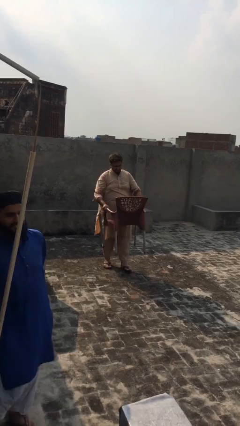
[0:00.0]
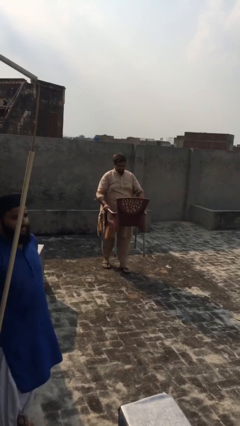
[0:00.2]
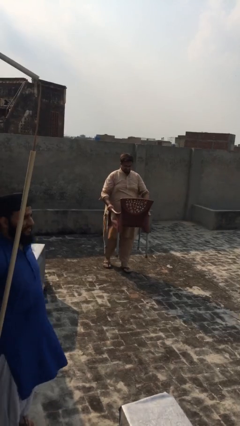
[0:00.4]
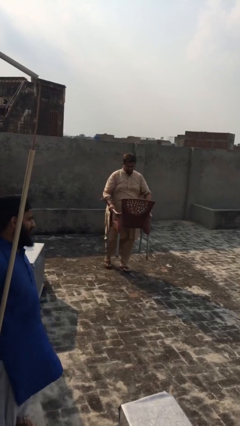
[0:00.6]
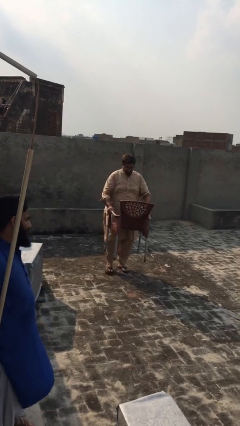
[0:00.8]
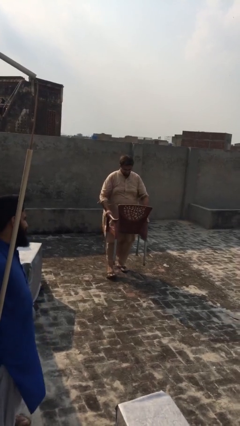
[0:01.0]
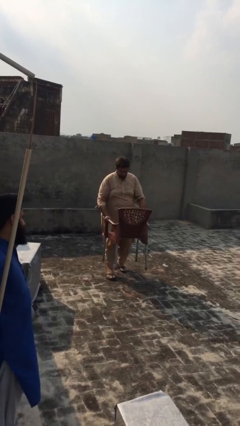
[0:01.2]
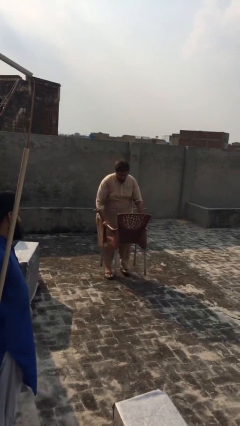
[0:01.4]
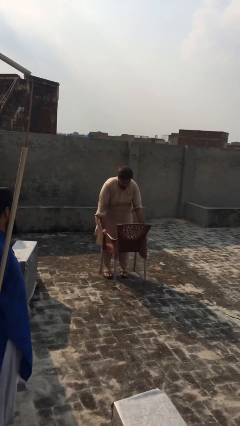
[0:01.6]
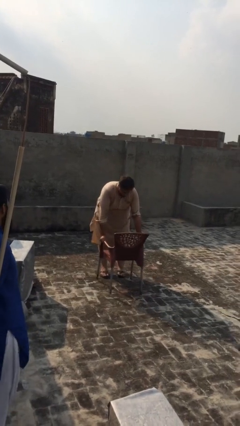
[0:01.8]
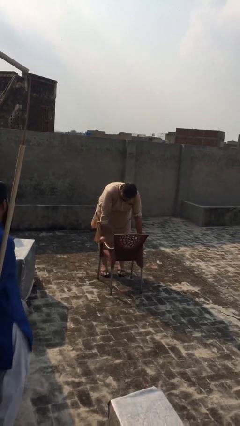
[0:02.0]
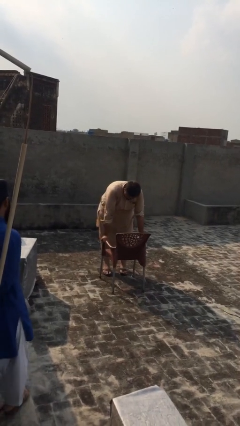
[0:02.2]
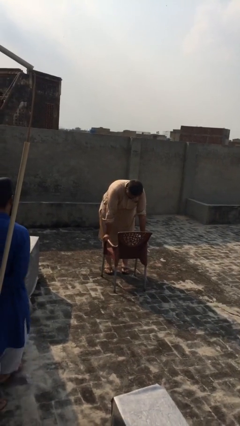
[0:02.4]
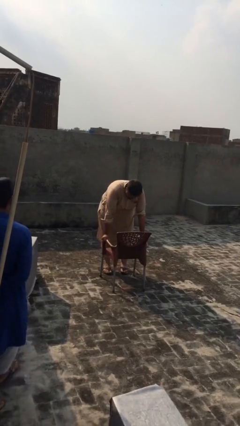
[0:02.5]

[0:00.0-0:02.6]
person puts down object on floor

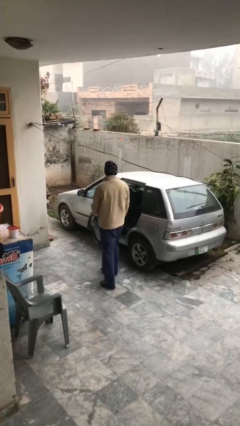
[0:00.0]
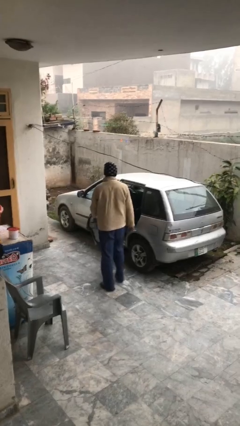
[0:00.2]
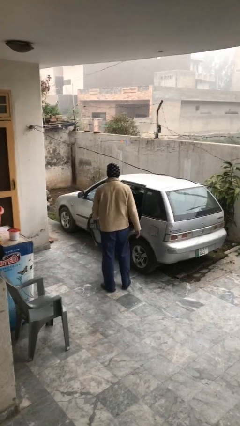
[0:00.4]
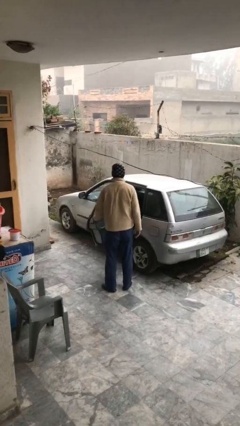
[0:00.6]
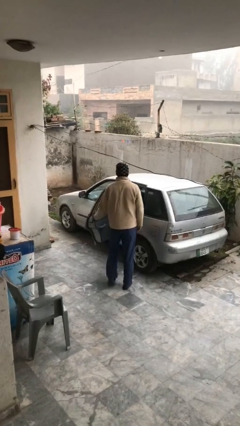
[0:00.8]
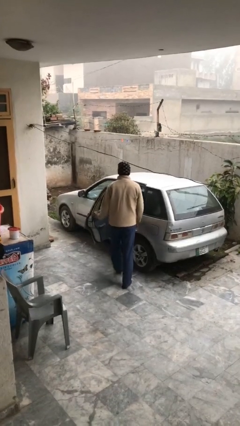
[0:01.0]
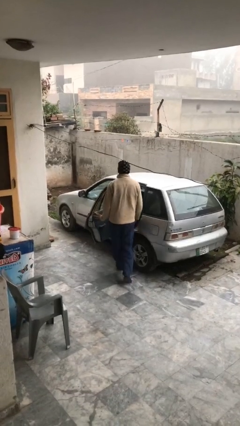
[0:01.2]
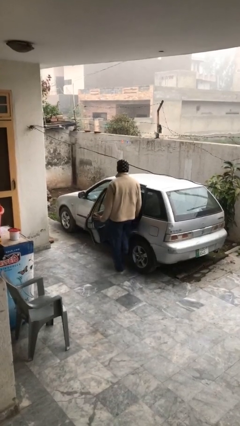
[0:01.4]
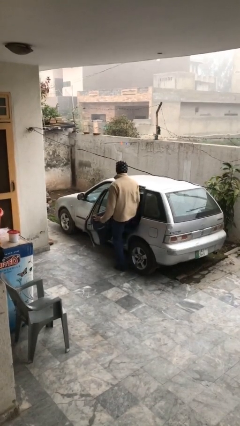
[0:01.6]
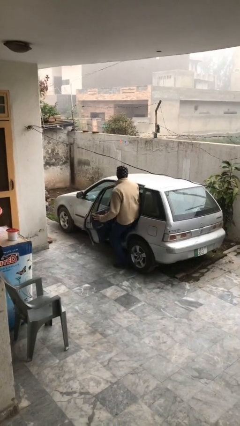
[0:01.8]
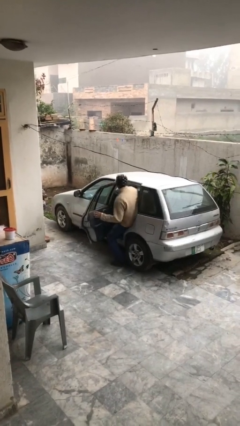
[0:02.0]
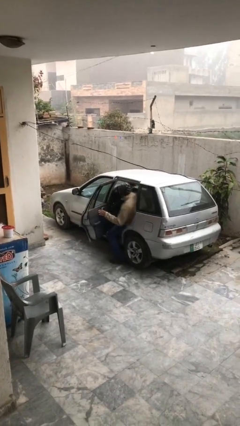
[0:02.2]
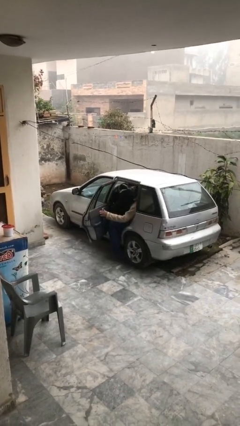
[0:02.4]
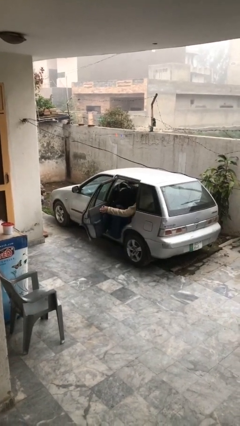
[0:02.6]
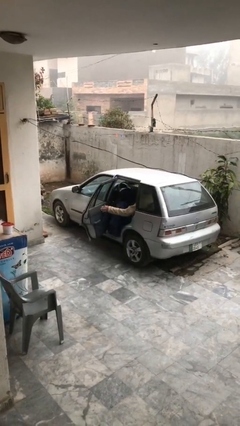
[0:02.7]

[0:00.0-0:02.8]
person enters car

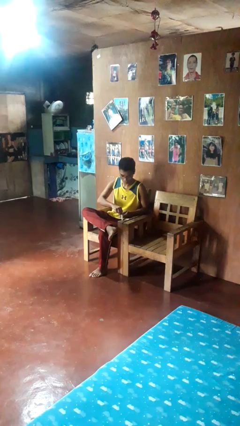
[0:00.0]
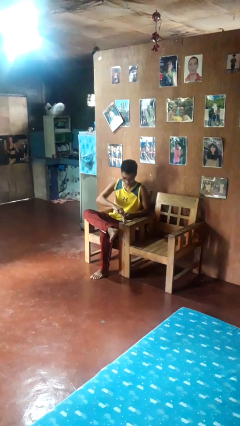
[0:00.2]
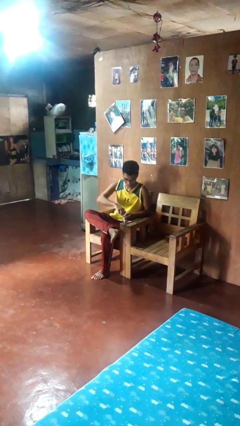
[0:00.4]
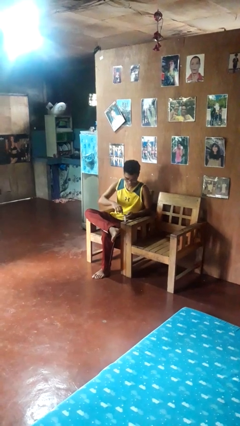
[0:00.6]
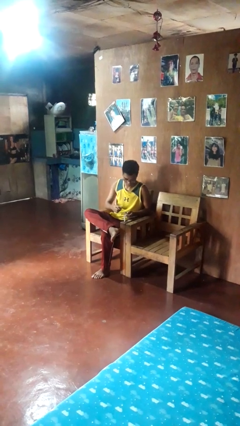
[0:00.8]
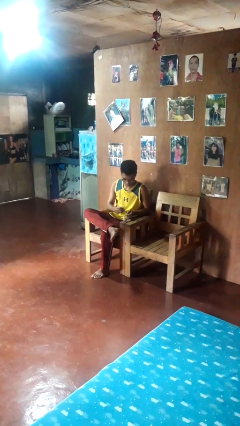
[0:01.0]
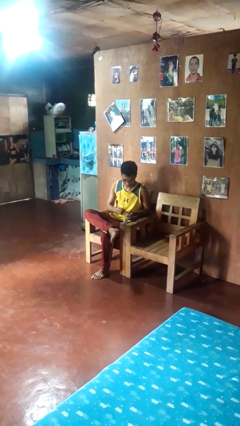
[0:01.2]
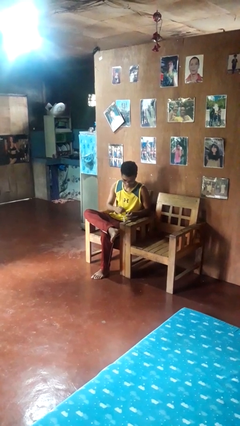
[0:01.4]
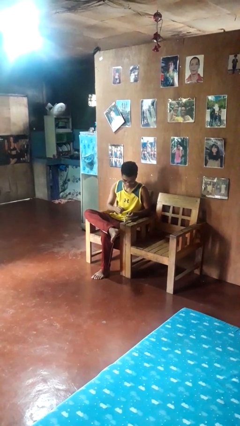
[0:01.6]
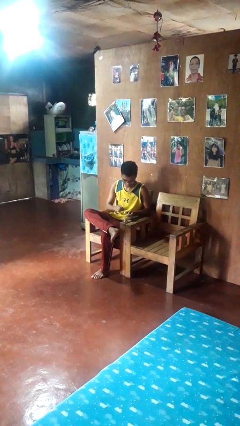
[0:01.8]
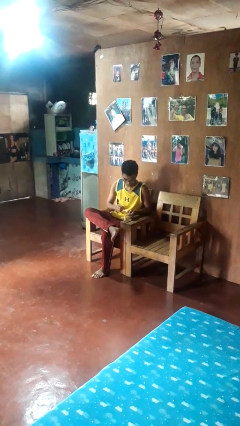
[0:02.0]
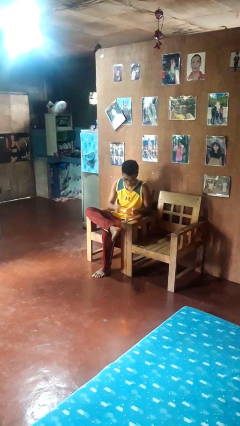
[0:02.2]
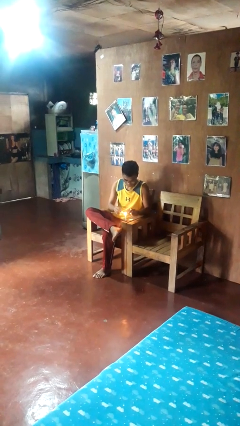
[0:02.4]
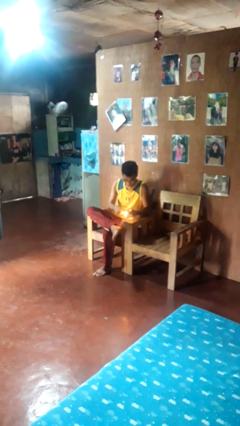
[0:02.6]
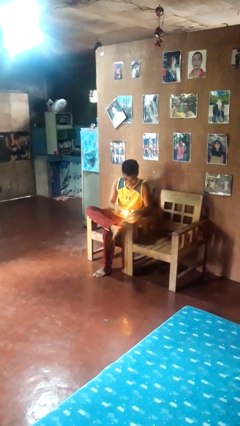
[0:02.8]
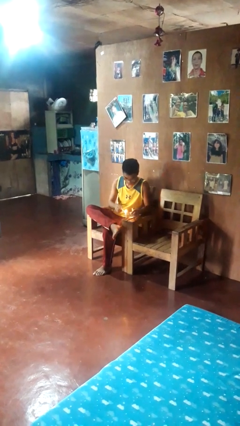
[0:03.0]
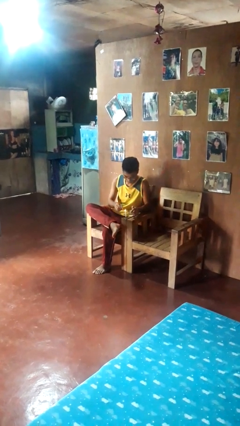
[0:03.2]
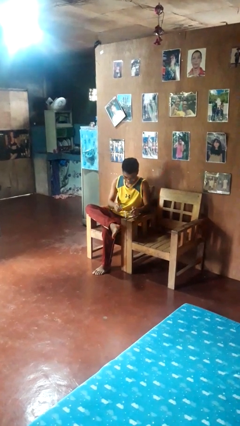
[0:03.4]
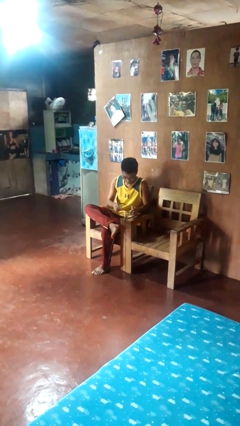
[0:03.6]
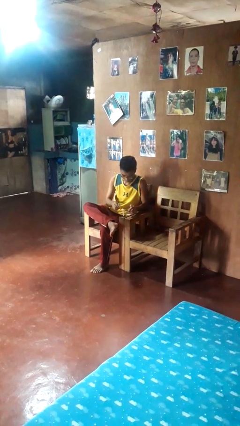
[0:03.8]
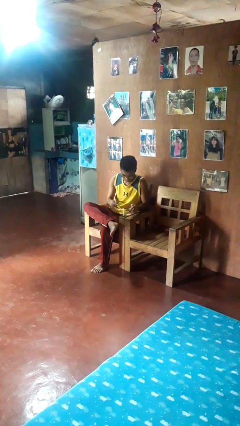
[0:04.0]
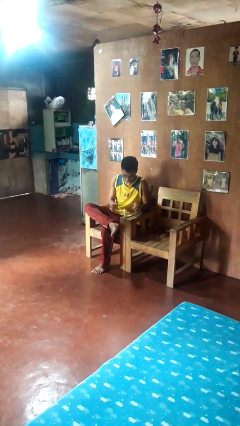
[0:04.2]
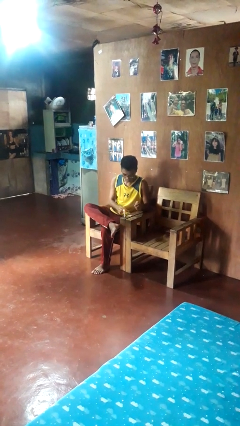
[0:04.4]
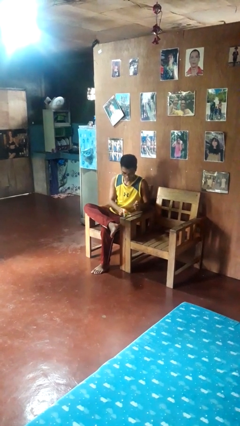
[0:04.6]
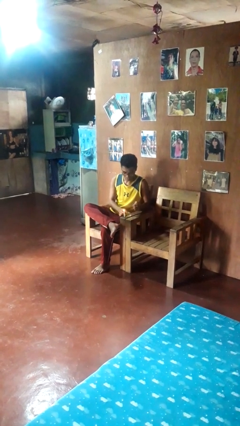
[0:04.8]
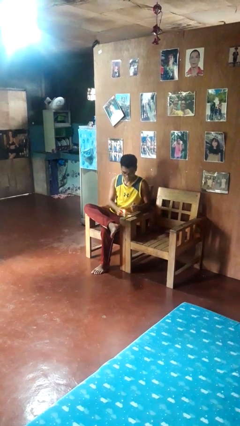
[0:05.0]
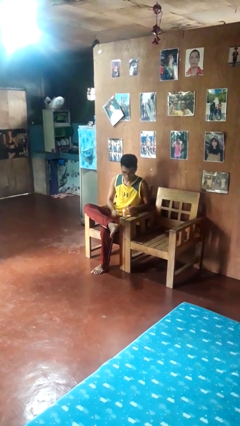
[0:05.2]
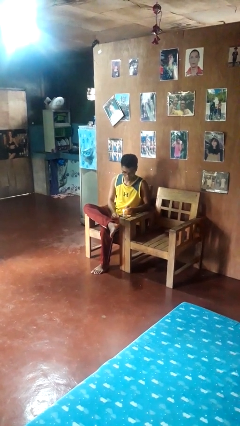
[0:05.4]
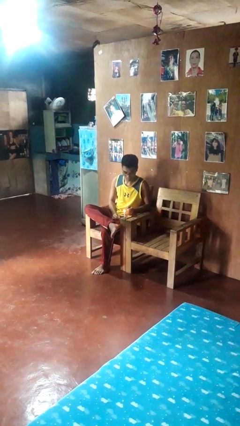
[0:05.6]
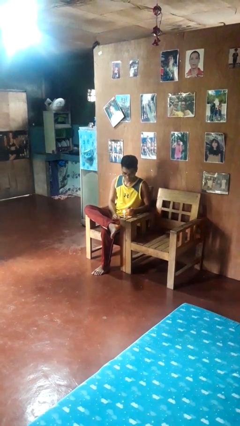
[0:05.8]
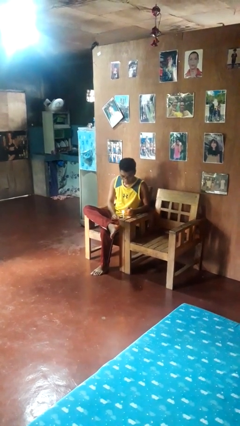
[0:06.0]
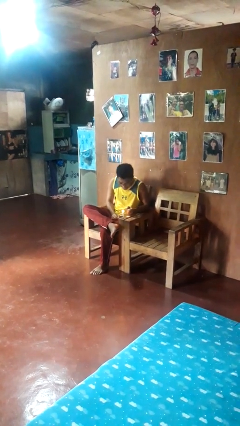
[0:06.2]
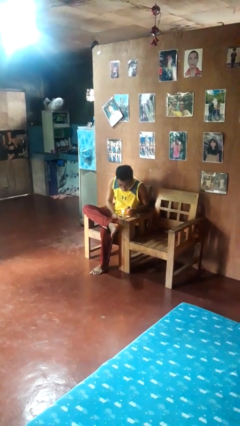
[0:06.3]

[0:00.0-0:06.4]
person lights candle

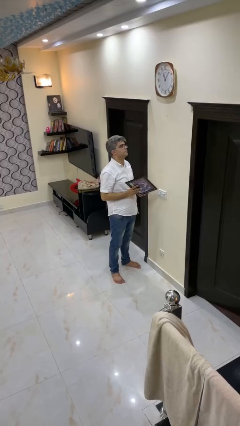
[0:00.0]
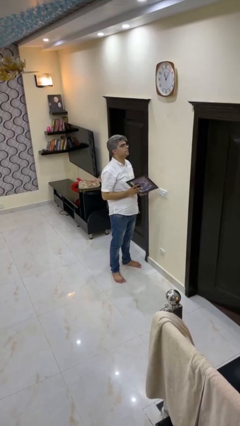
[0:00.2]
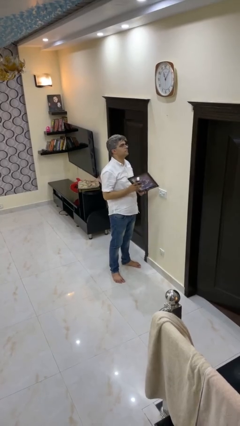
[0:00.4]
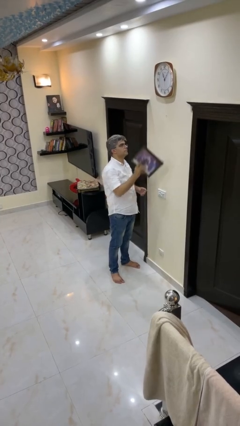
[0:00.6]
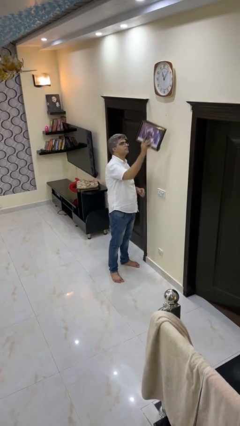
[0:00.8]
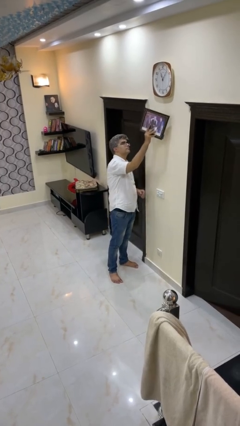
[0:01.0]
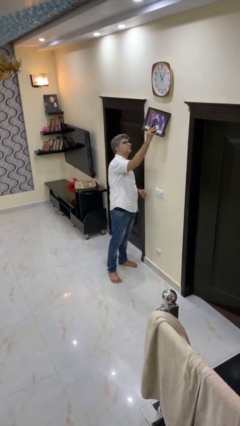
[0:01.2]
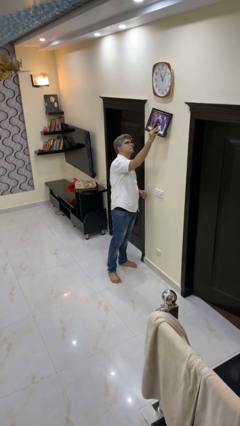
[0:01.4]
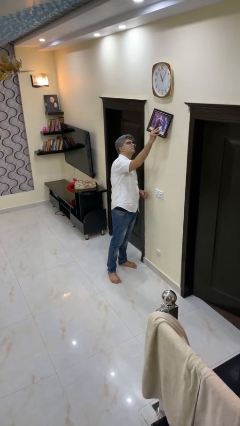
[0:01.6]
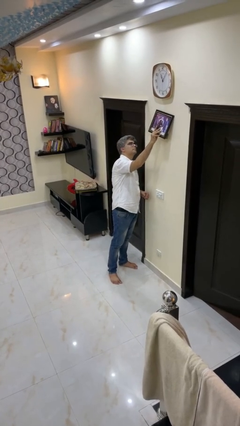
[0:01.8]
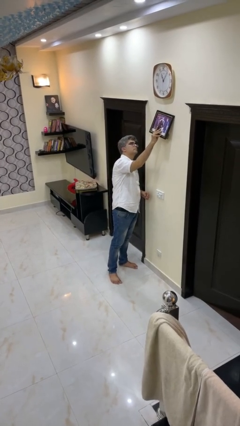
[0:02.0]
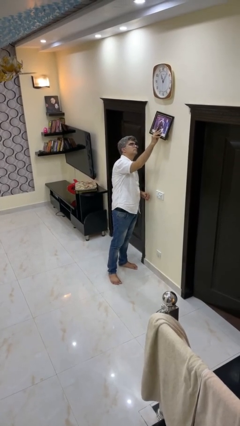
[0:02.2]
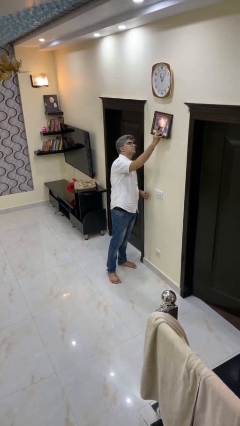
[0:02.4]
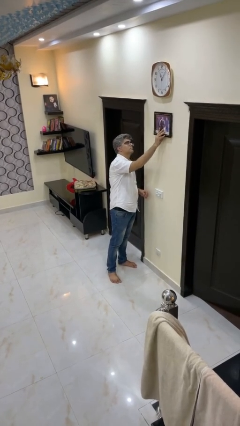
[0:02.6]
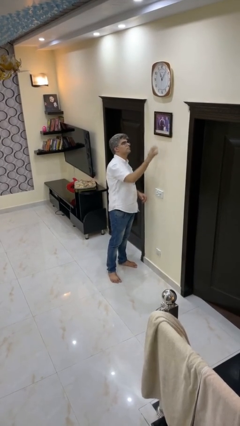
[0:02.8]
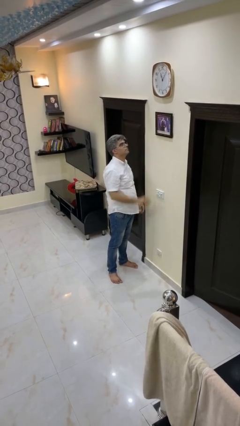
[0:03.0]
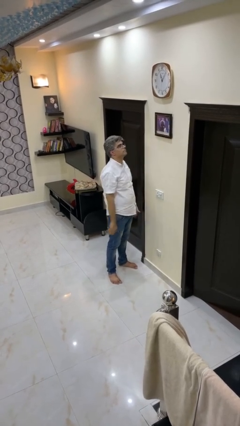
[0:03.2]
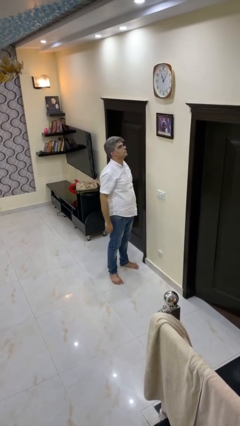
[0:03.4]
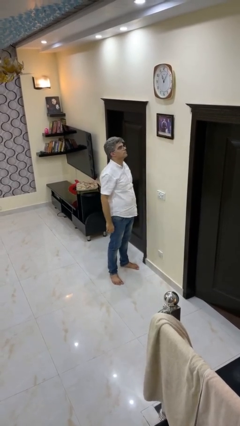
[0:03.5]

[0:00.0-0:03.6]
person puts up picture frame

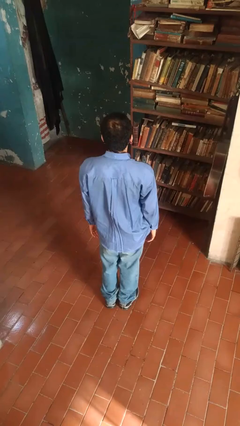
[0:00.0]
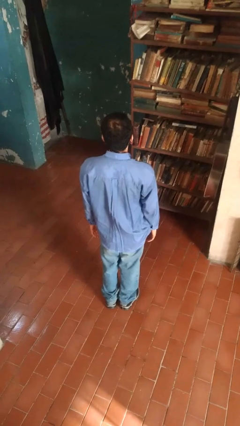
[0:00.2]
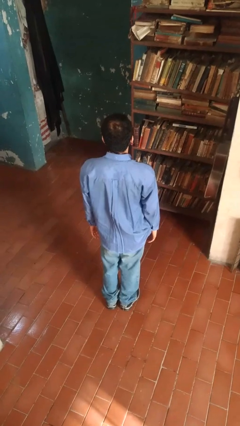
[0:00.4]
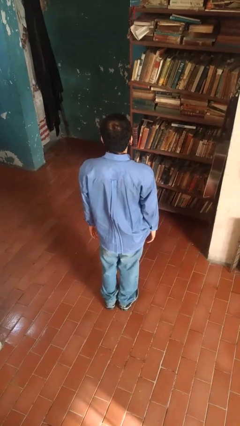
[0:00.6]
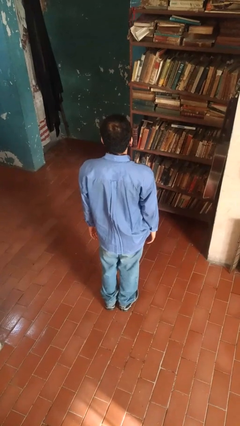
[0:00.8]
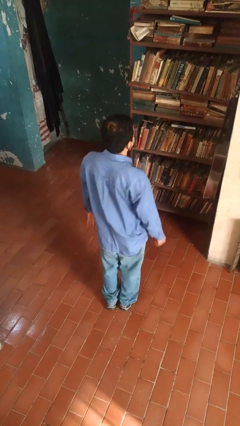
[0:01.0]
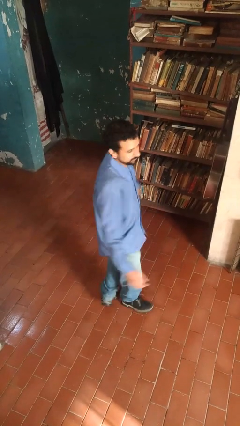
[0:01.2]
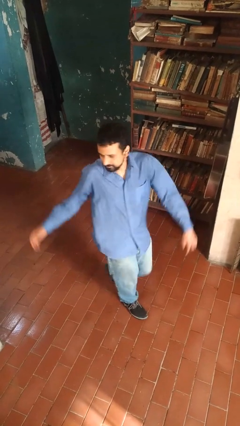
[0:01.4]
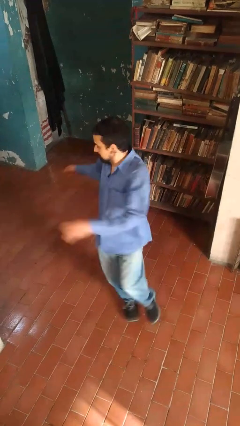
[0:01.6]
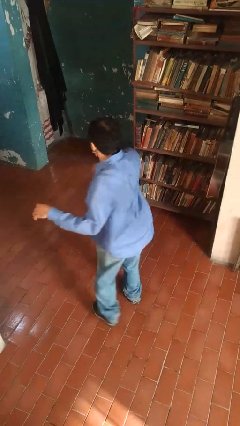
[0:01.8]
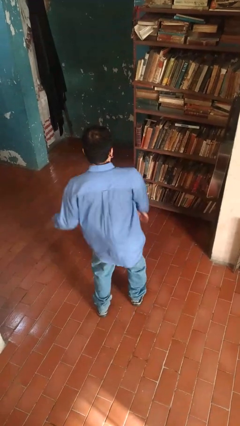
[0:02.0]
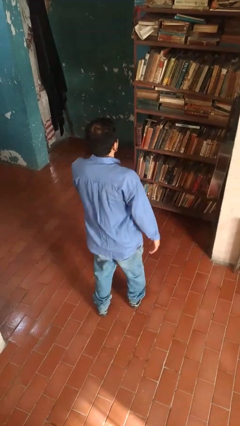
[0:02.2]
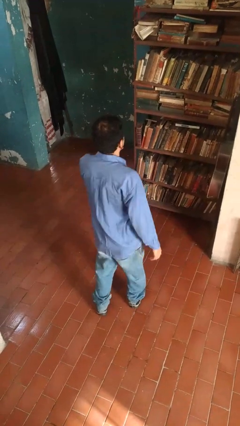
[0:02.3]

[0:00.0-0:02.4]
person twirls
